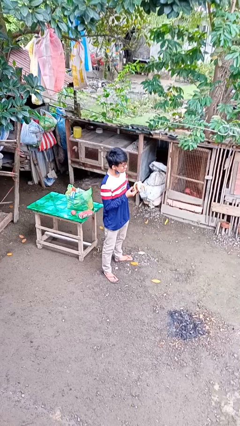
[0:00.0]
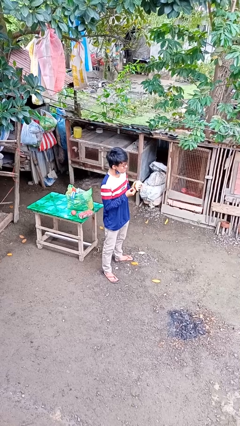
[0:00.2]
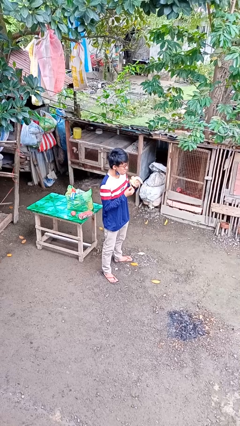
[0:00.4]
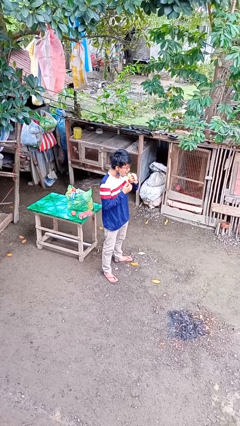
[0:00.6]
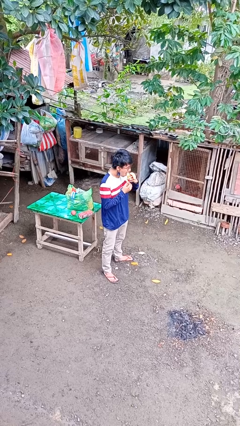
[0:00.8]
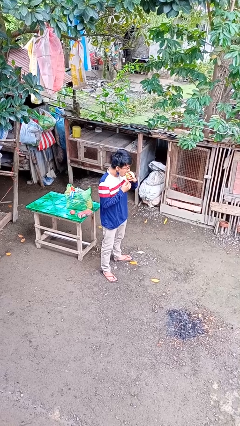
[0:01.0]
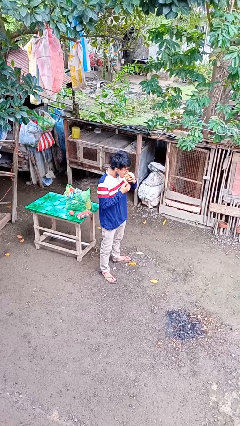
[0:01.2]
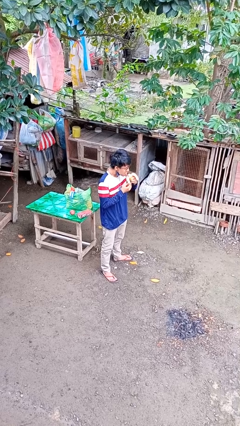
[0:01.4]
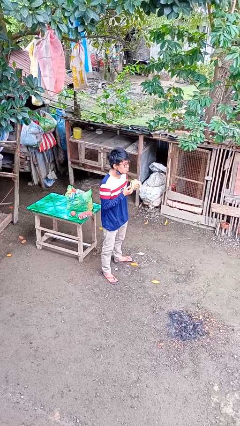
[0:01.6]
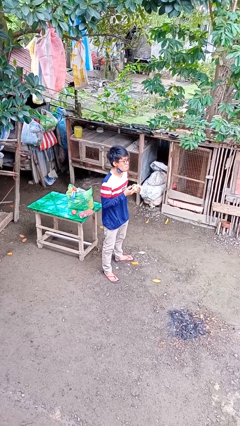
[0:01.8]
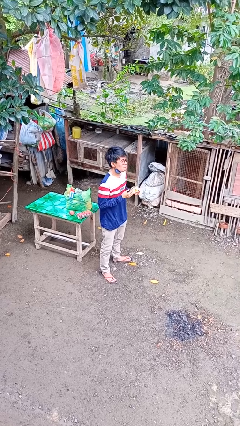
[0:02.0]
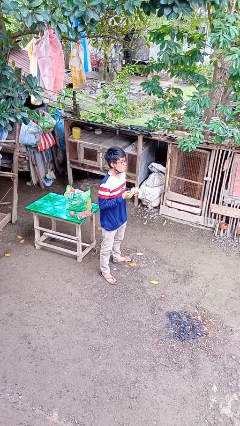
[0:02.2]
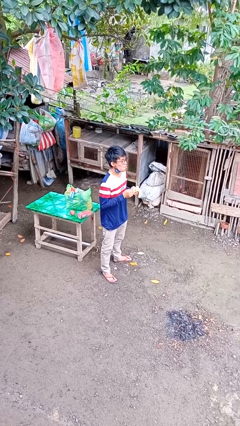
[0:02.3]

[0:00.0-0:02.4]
person eats banana

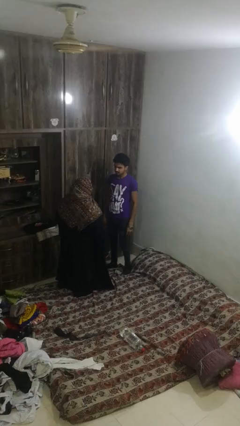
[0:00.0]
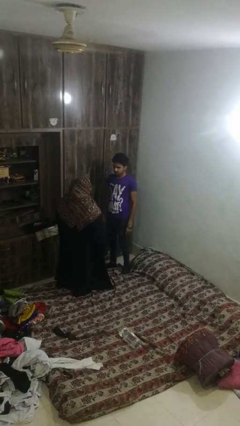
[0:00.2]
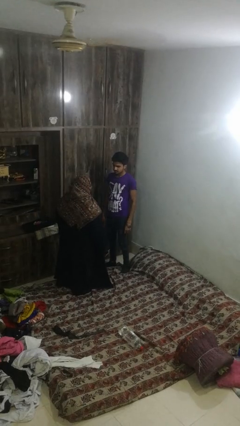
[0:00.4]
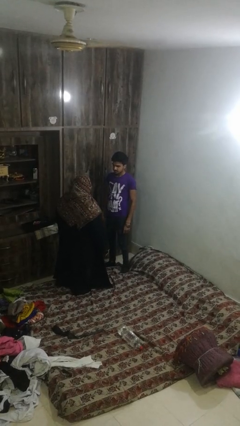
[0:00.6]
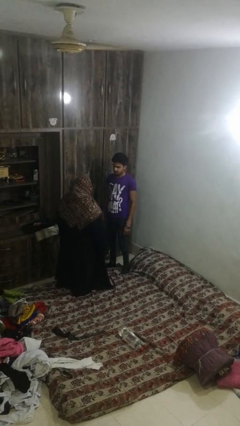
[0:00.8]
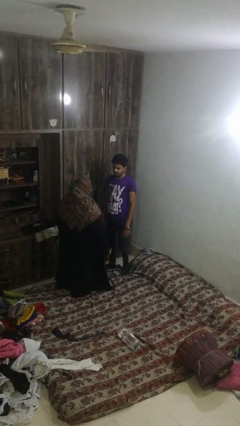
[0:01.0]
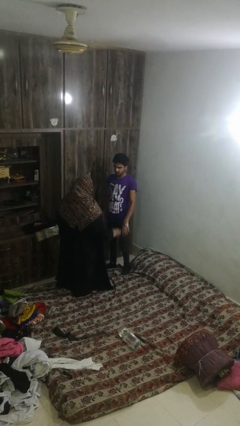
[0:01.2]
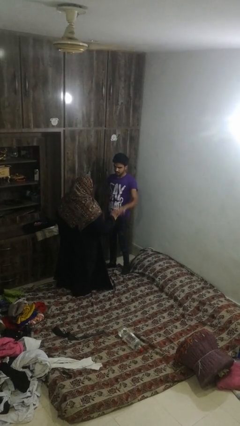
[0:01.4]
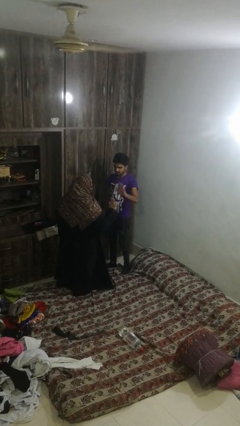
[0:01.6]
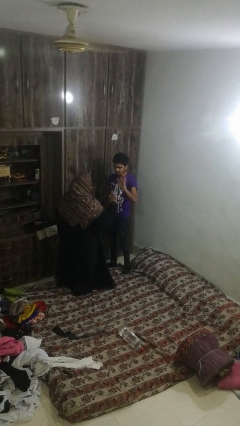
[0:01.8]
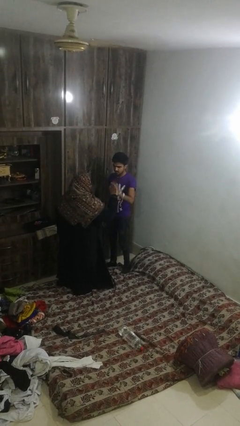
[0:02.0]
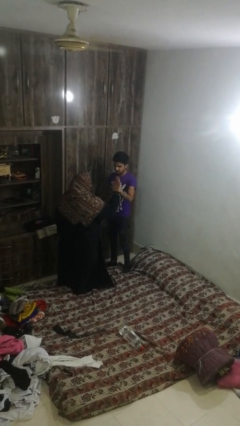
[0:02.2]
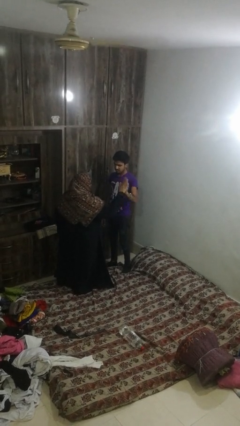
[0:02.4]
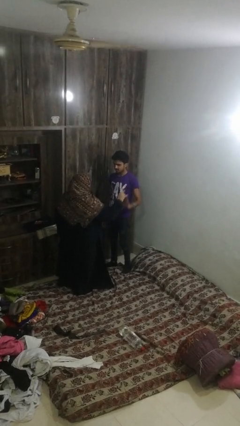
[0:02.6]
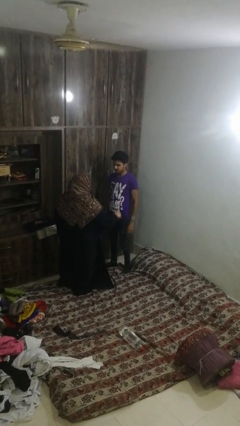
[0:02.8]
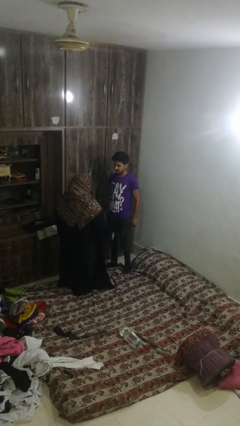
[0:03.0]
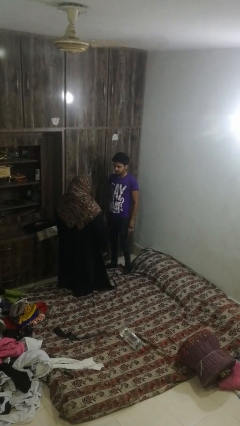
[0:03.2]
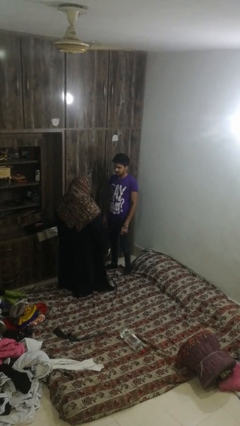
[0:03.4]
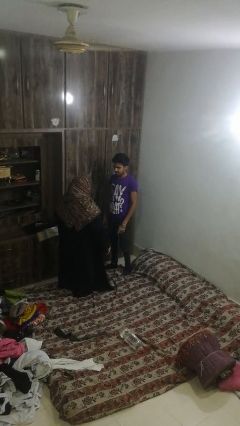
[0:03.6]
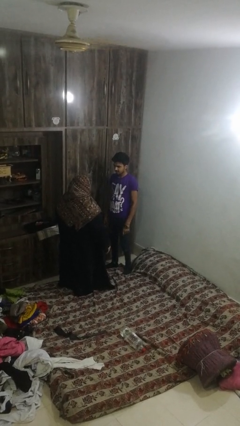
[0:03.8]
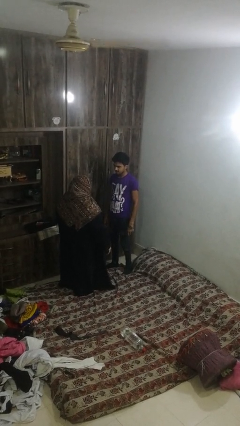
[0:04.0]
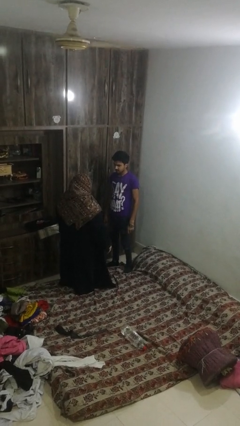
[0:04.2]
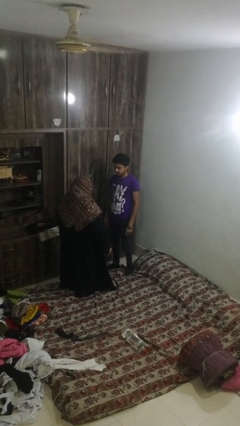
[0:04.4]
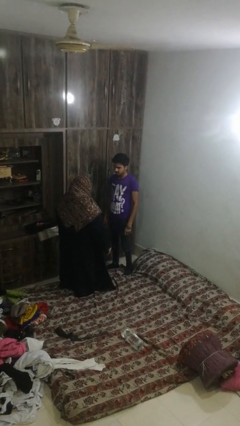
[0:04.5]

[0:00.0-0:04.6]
person highfives hand

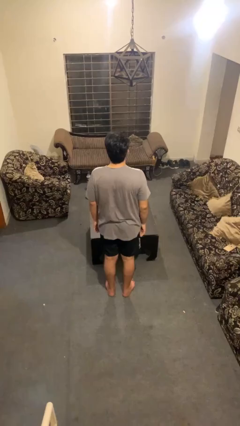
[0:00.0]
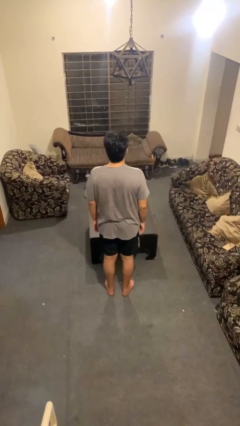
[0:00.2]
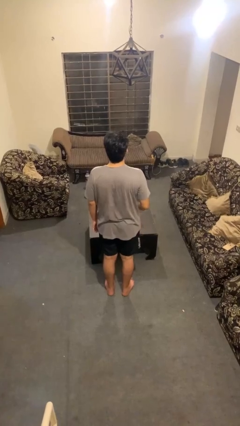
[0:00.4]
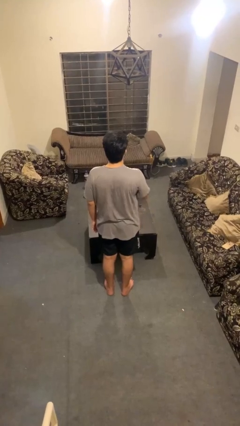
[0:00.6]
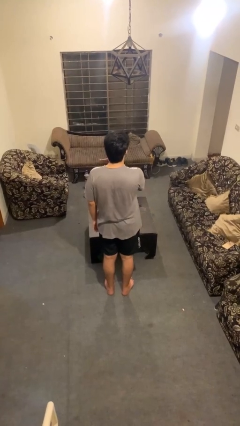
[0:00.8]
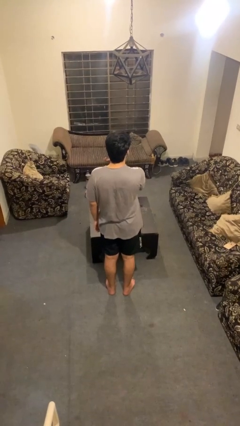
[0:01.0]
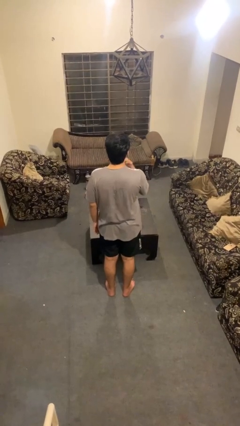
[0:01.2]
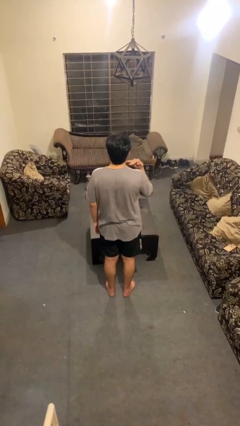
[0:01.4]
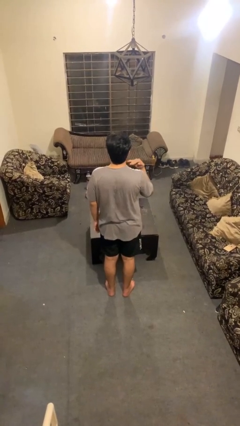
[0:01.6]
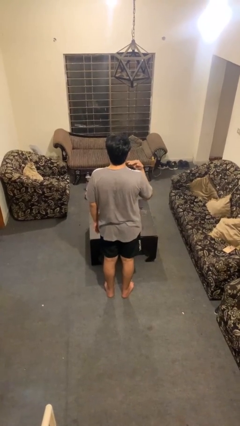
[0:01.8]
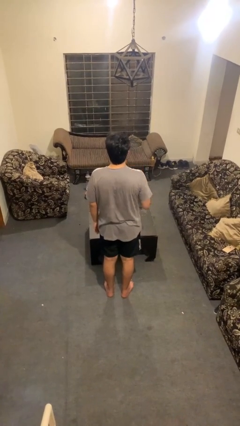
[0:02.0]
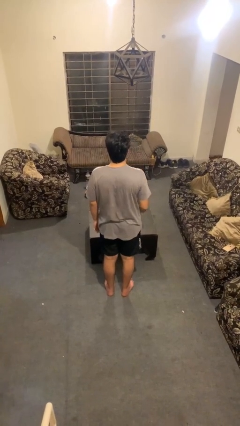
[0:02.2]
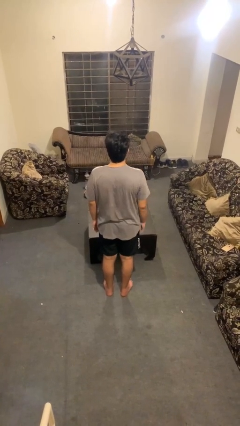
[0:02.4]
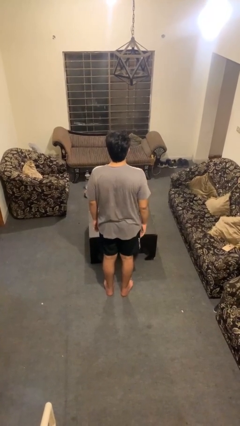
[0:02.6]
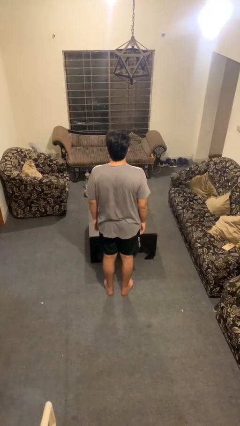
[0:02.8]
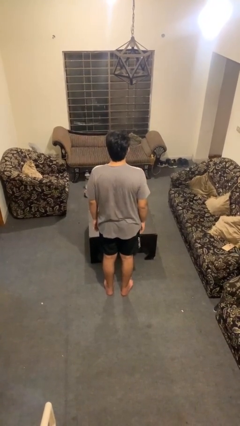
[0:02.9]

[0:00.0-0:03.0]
person gestures cut

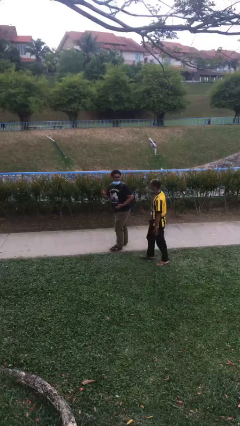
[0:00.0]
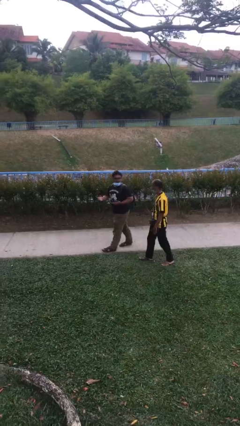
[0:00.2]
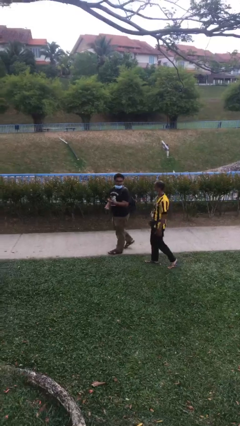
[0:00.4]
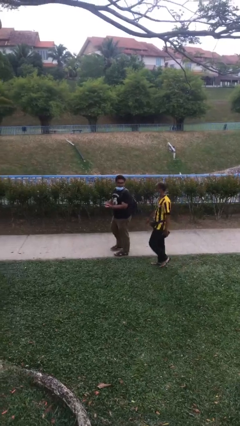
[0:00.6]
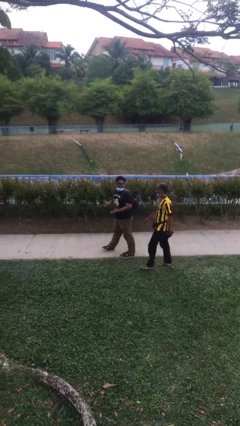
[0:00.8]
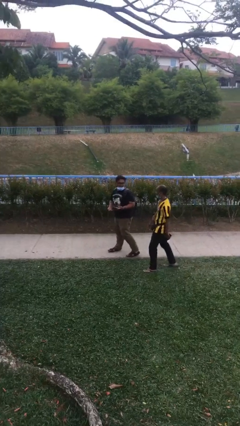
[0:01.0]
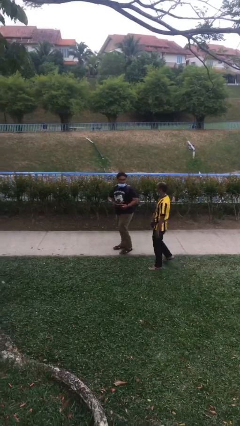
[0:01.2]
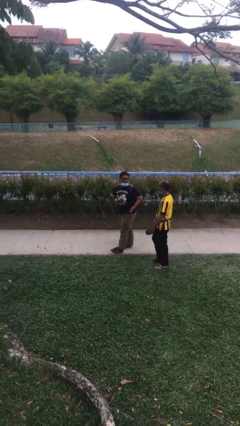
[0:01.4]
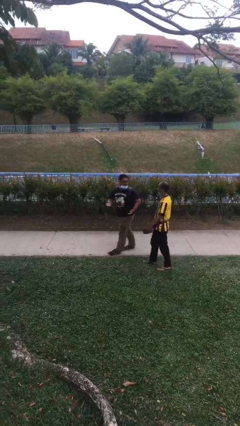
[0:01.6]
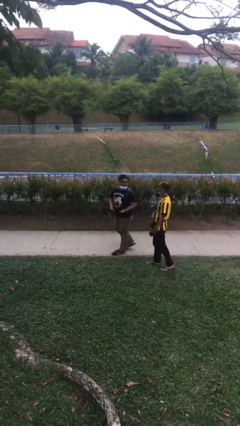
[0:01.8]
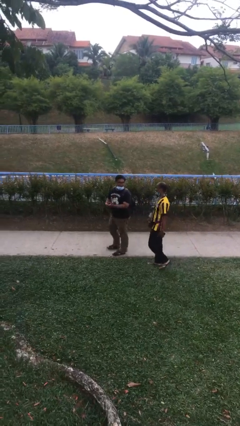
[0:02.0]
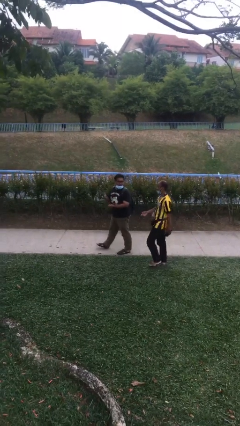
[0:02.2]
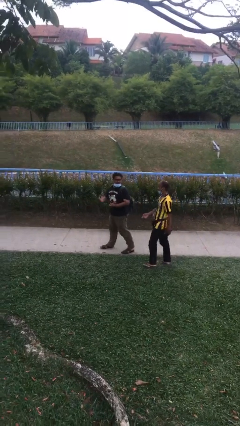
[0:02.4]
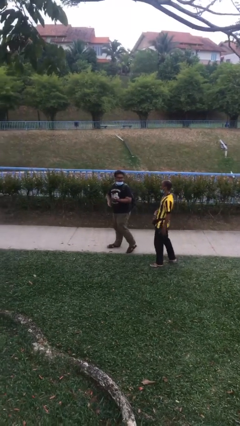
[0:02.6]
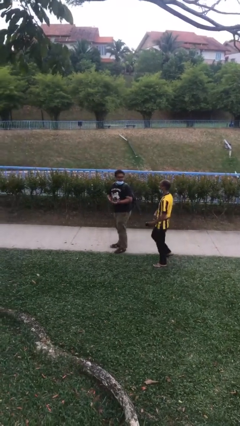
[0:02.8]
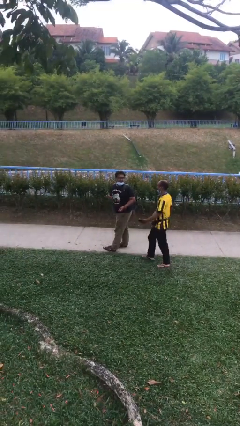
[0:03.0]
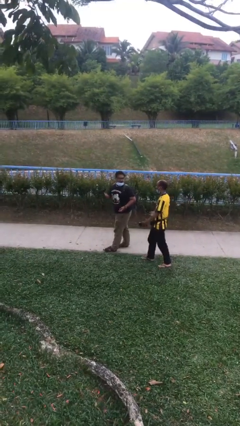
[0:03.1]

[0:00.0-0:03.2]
person talks to person

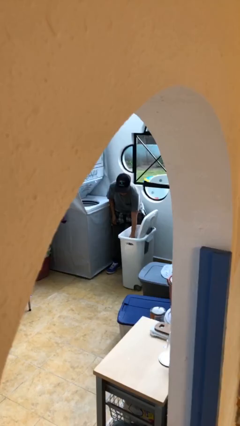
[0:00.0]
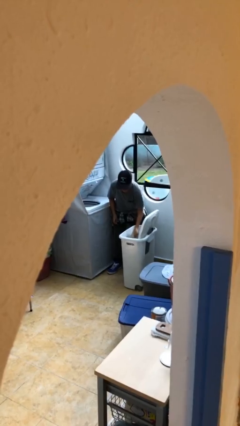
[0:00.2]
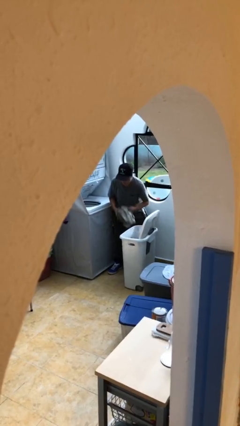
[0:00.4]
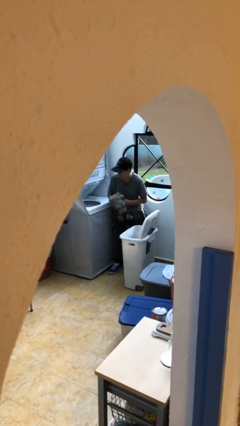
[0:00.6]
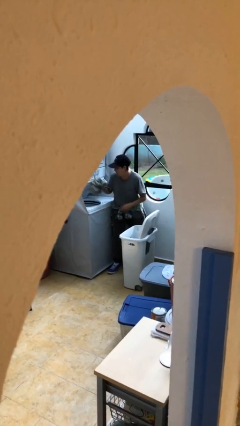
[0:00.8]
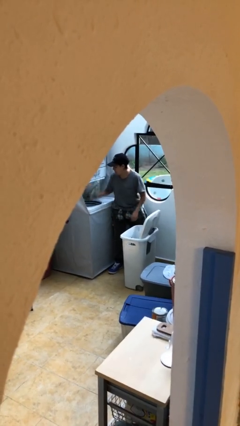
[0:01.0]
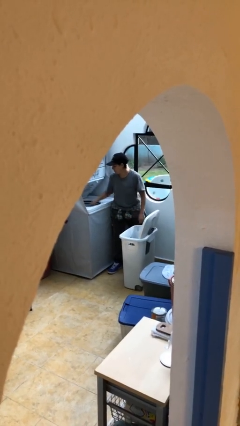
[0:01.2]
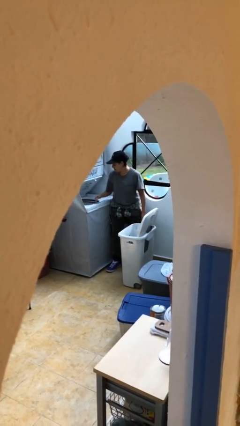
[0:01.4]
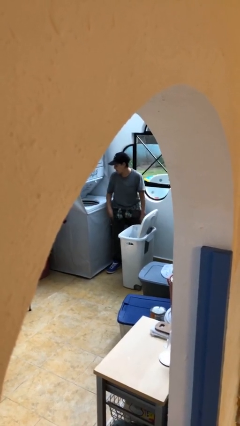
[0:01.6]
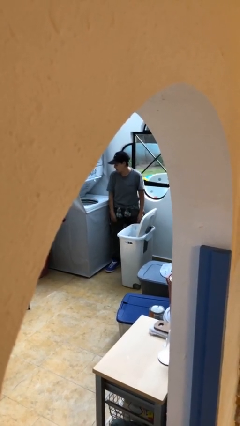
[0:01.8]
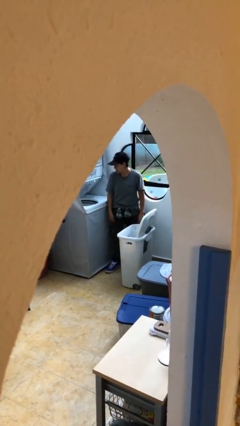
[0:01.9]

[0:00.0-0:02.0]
person loads clotheswasher

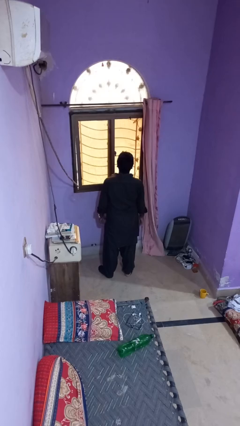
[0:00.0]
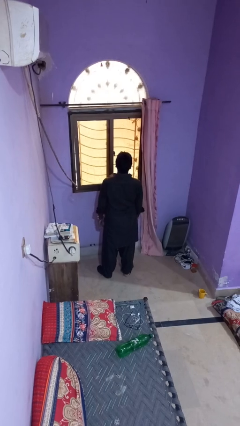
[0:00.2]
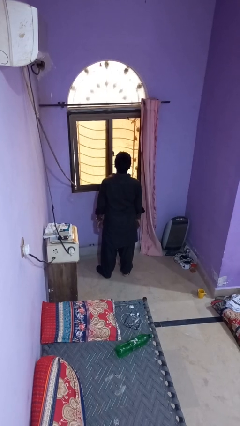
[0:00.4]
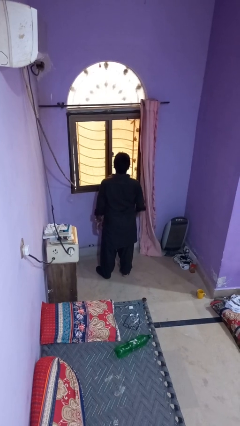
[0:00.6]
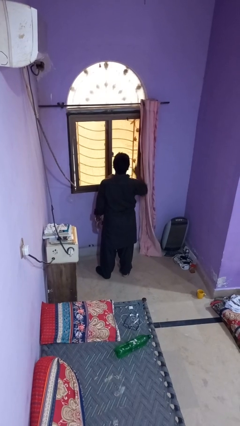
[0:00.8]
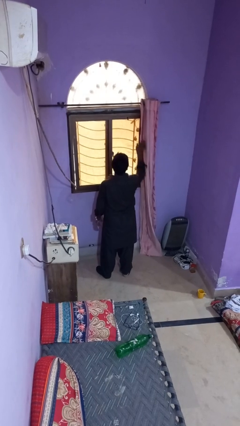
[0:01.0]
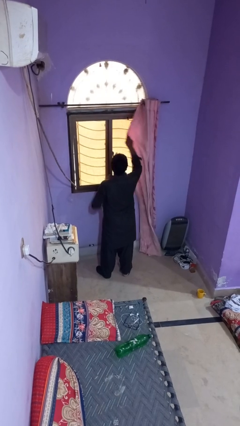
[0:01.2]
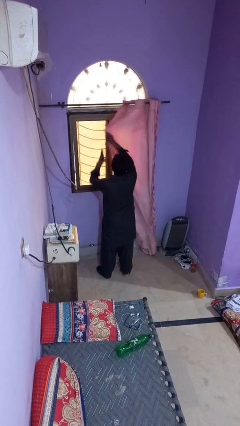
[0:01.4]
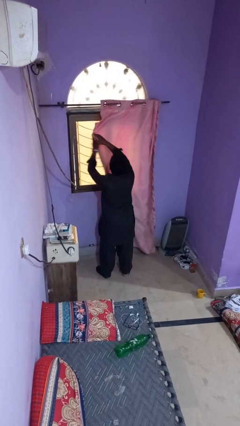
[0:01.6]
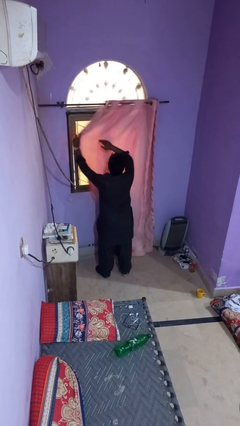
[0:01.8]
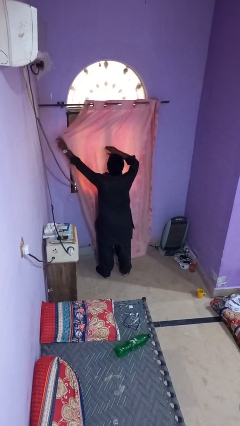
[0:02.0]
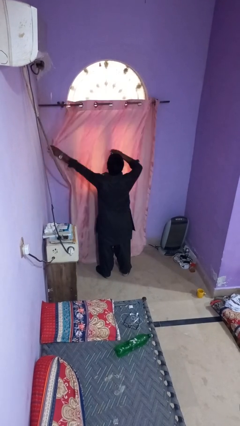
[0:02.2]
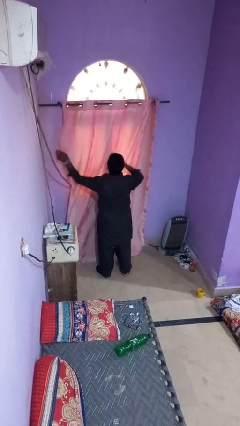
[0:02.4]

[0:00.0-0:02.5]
person closes curtains
